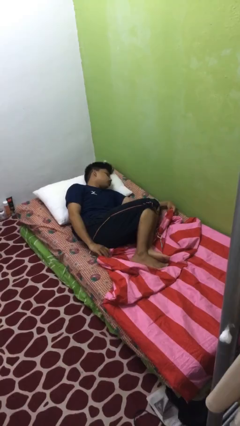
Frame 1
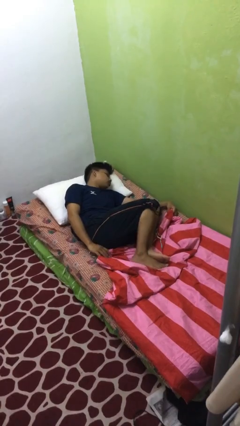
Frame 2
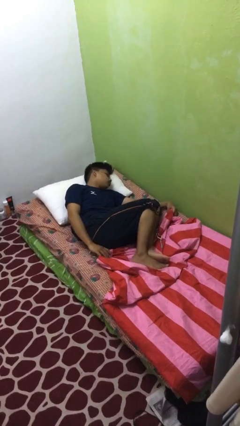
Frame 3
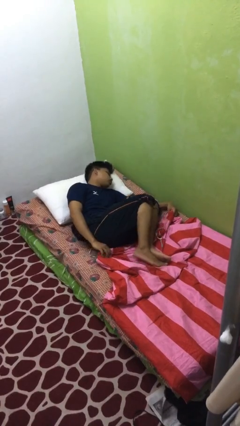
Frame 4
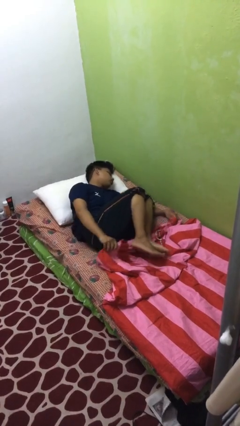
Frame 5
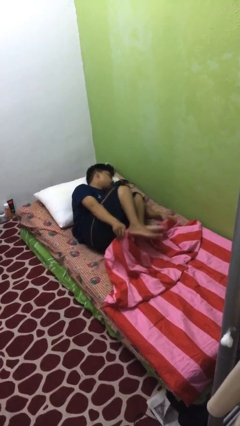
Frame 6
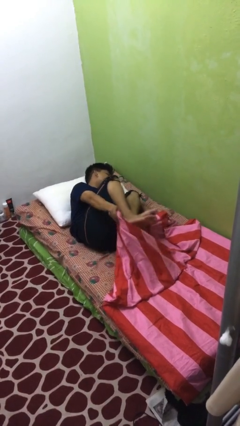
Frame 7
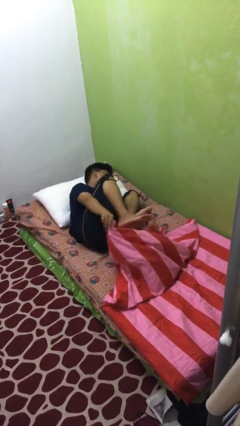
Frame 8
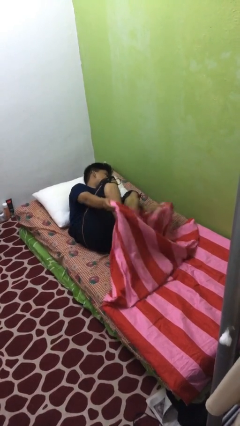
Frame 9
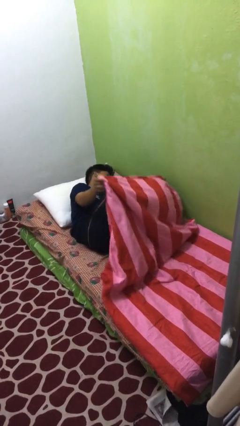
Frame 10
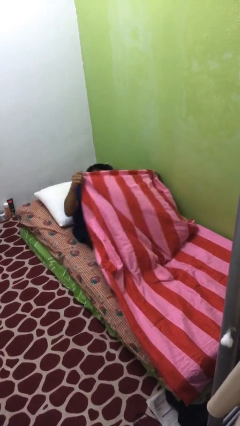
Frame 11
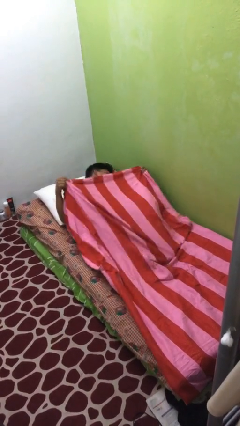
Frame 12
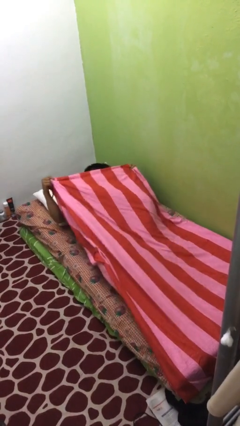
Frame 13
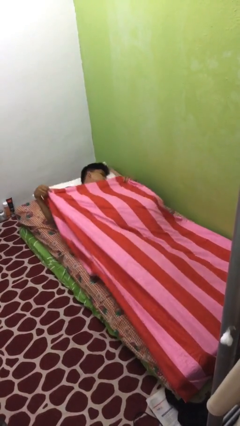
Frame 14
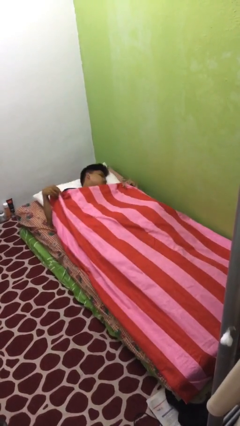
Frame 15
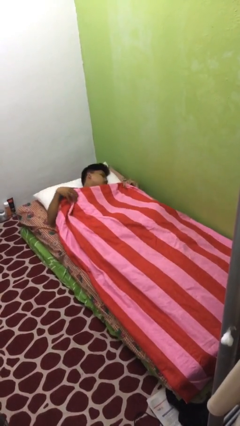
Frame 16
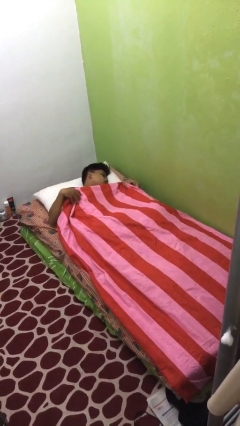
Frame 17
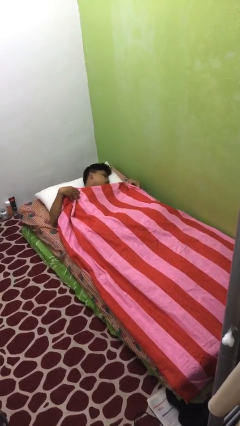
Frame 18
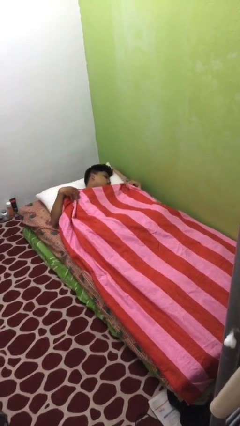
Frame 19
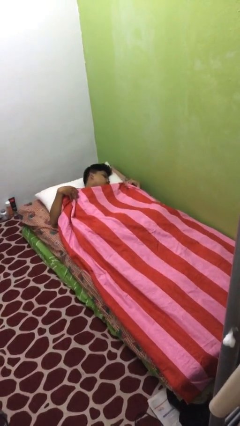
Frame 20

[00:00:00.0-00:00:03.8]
person covers with bedsheets

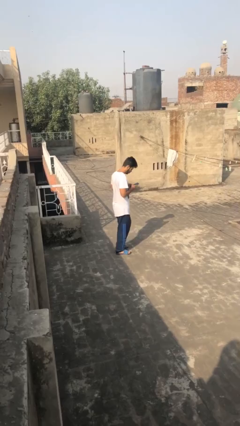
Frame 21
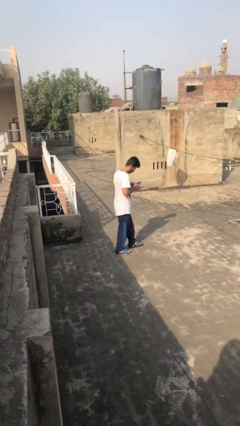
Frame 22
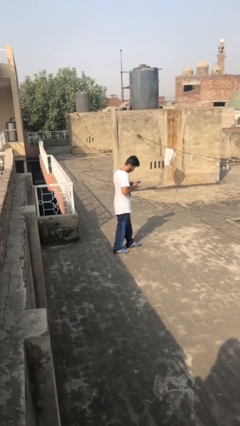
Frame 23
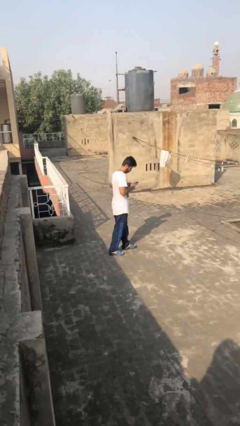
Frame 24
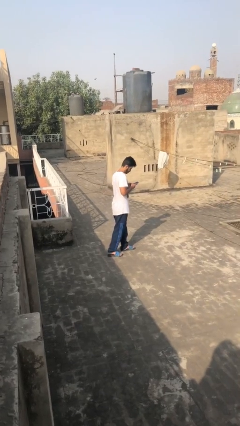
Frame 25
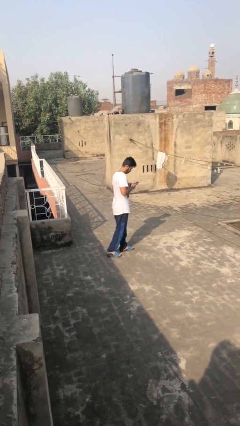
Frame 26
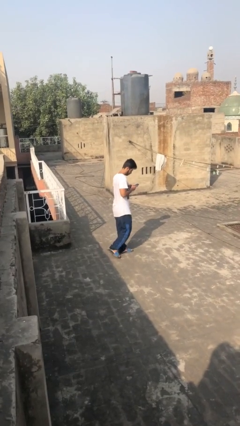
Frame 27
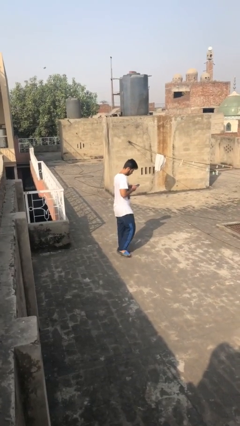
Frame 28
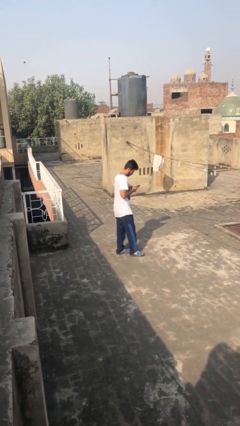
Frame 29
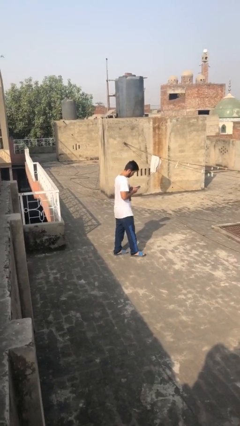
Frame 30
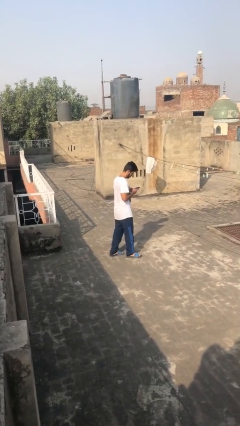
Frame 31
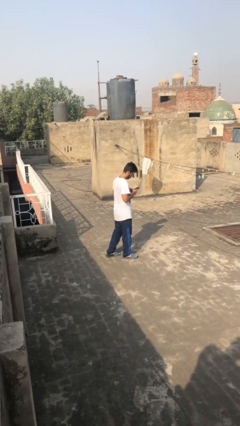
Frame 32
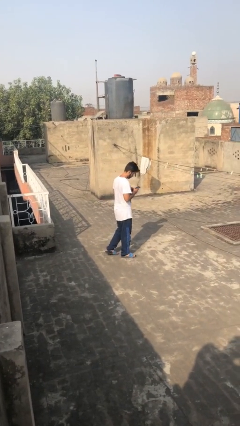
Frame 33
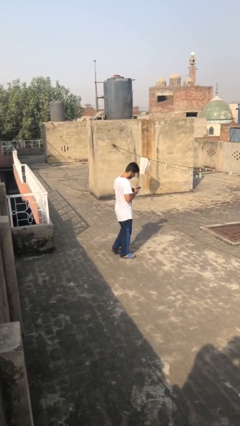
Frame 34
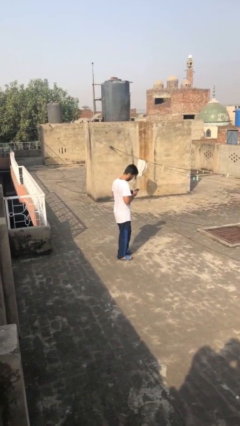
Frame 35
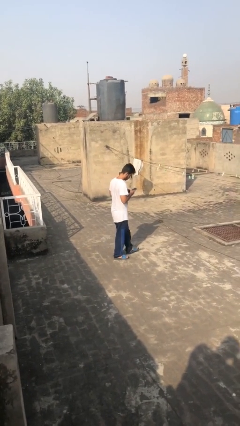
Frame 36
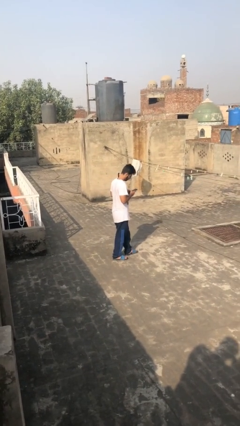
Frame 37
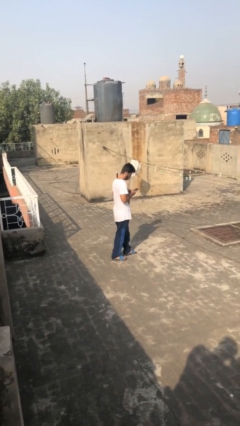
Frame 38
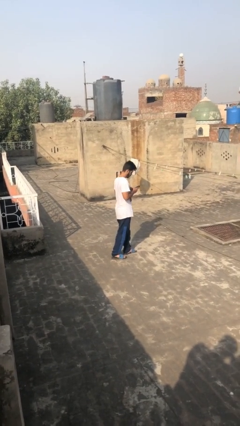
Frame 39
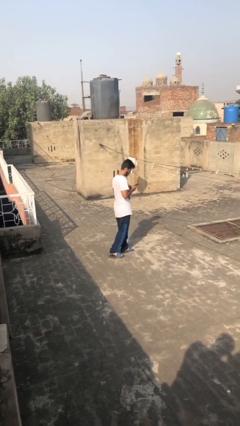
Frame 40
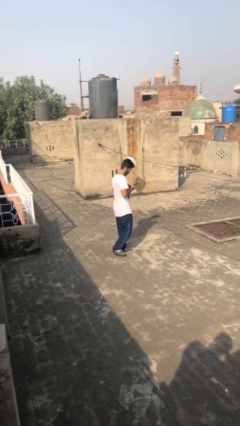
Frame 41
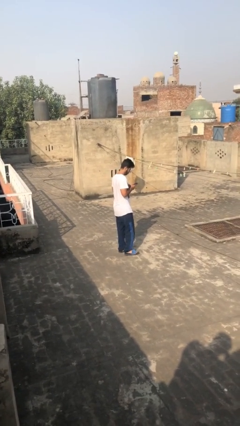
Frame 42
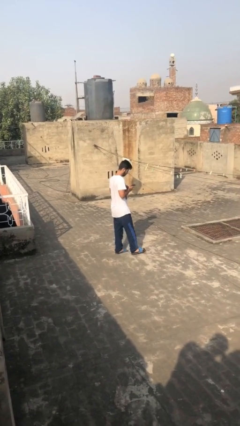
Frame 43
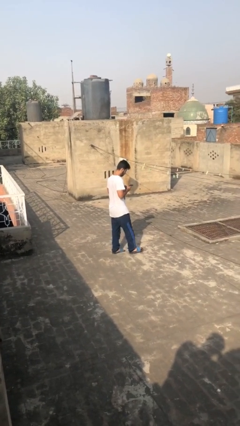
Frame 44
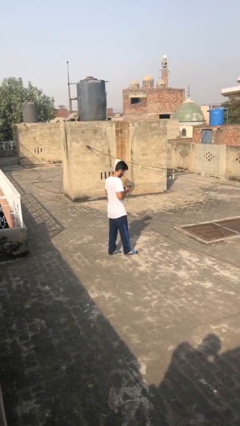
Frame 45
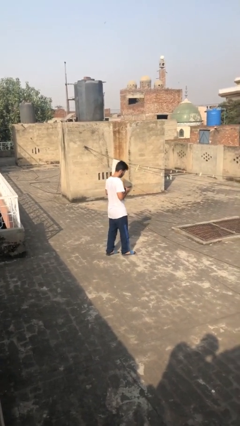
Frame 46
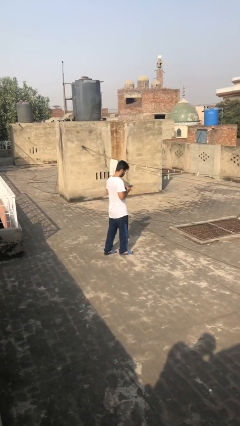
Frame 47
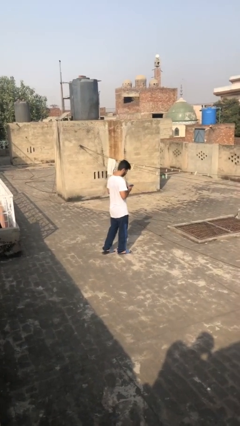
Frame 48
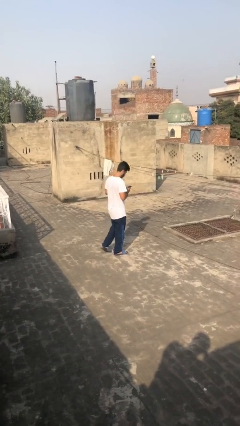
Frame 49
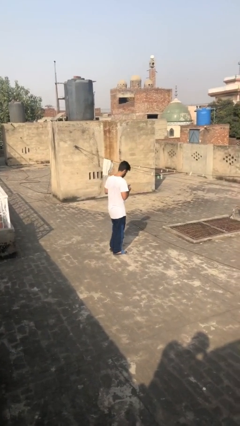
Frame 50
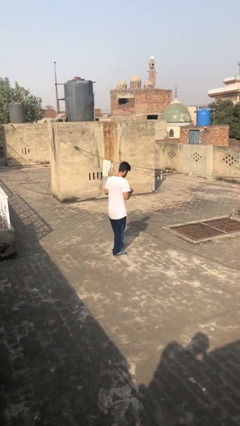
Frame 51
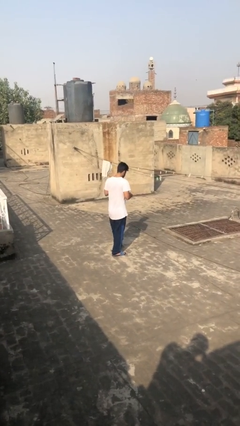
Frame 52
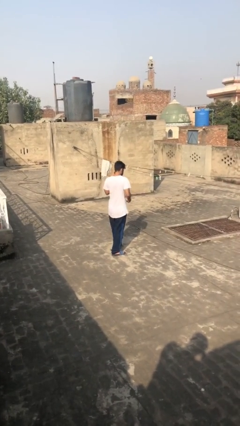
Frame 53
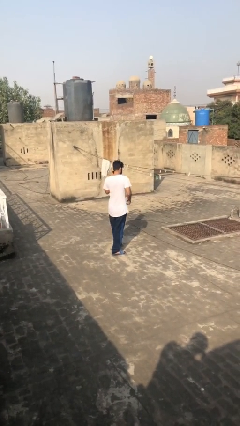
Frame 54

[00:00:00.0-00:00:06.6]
person texts on phone

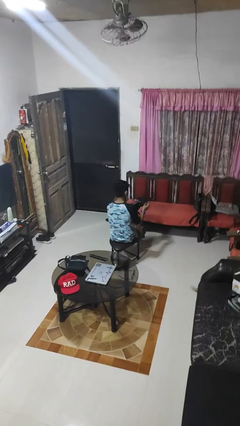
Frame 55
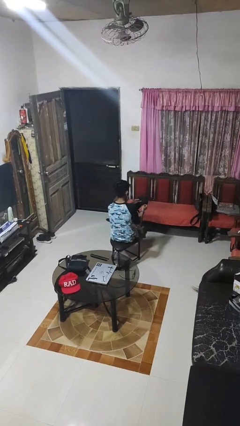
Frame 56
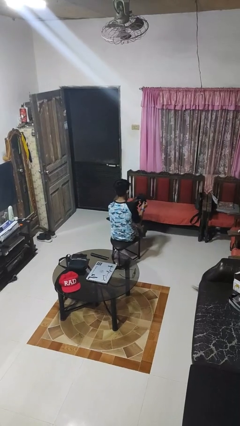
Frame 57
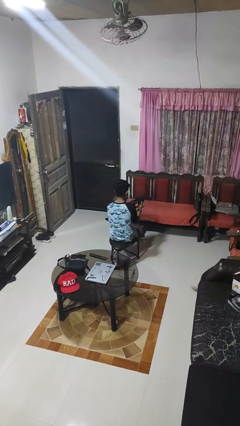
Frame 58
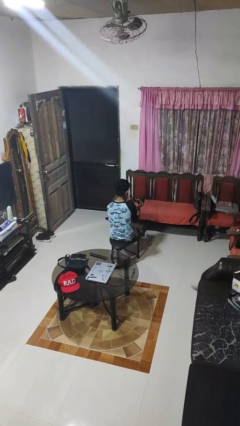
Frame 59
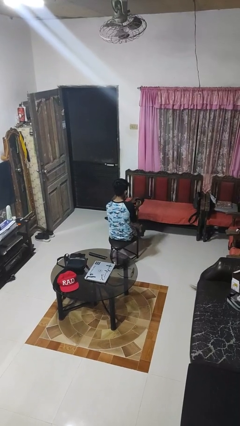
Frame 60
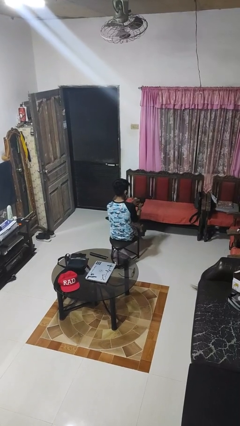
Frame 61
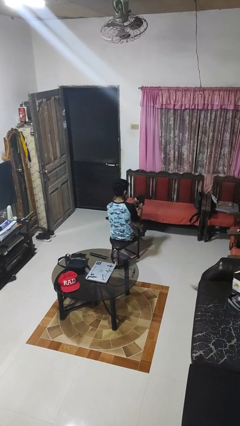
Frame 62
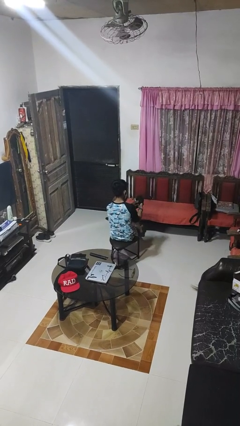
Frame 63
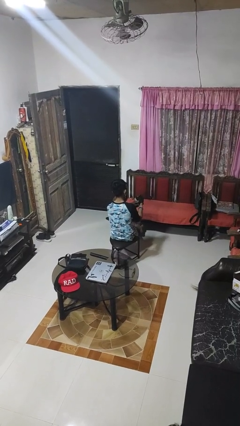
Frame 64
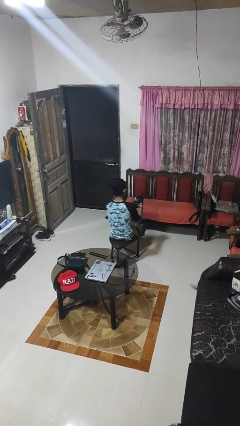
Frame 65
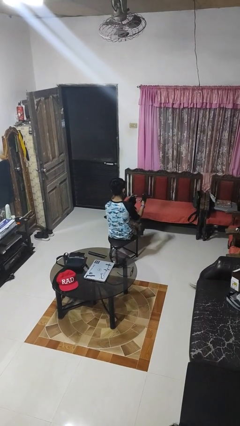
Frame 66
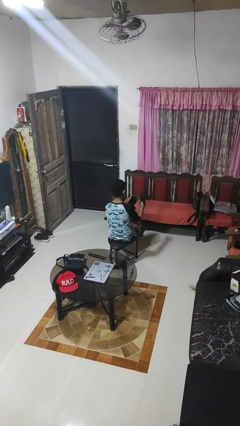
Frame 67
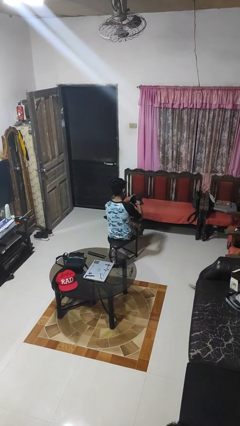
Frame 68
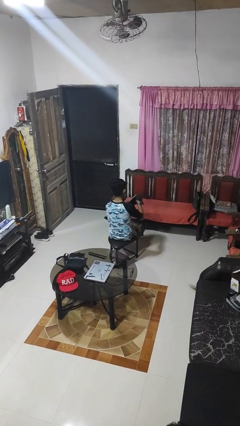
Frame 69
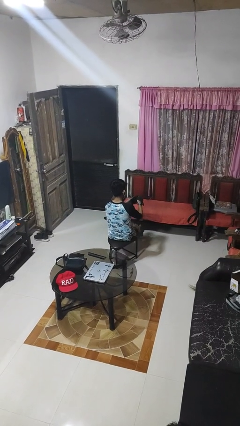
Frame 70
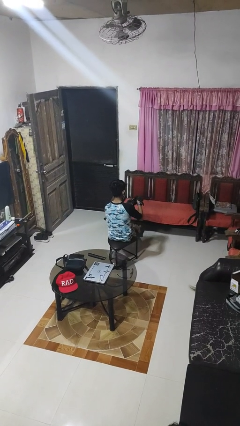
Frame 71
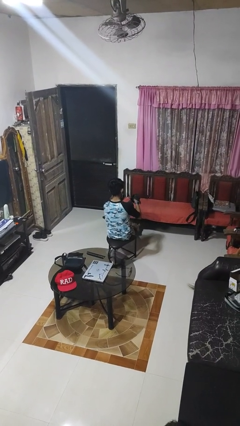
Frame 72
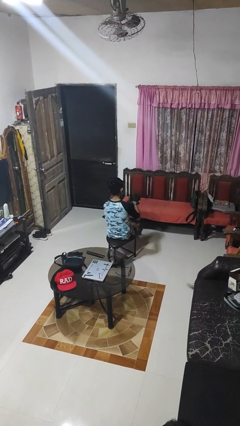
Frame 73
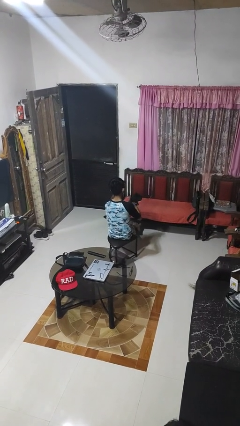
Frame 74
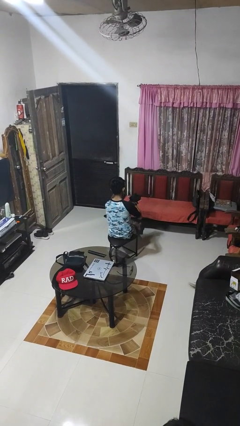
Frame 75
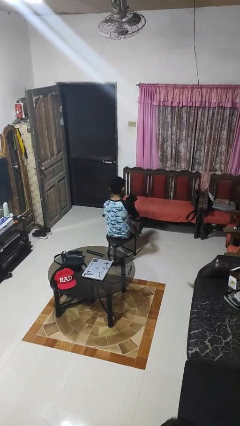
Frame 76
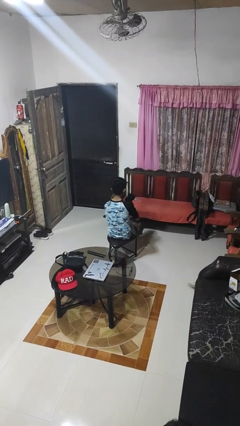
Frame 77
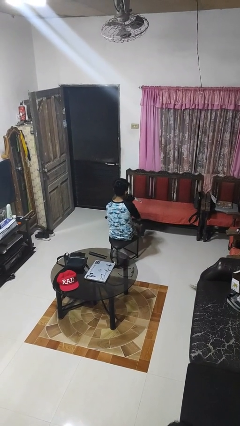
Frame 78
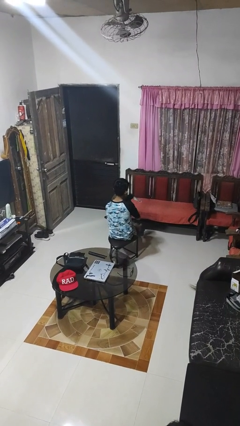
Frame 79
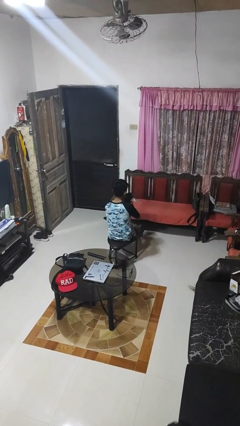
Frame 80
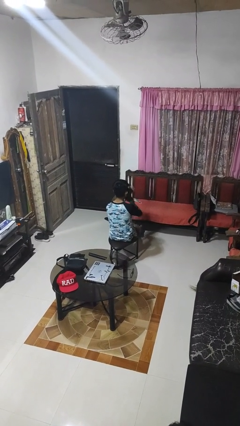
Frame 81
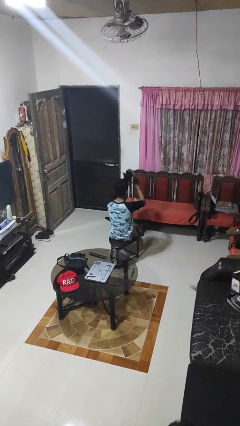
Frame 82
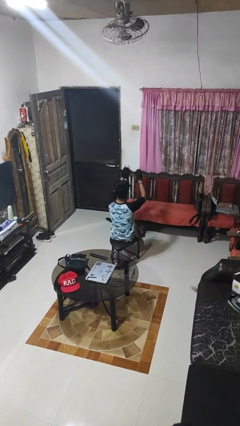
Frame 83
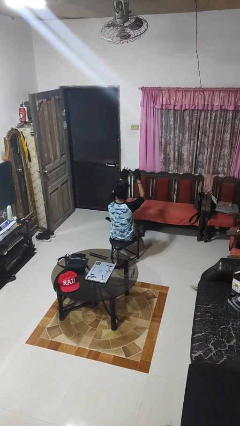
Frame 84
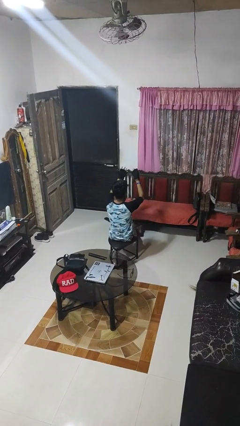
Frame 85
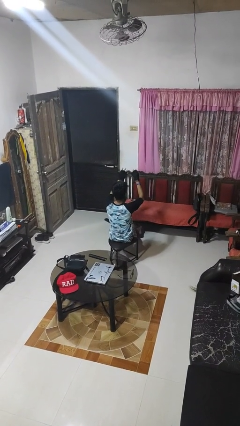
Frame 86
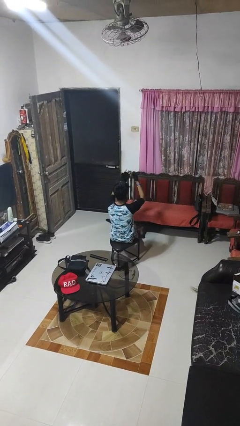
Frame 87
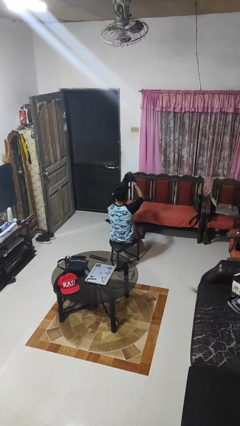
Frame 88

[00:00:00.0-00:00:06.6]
person puts on gloves

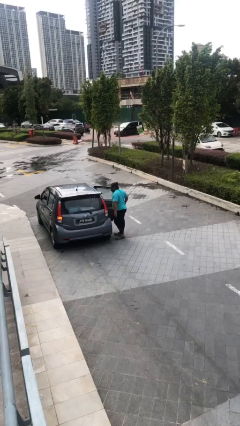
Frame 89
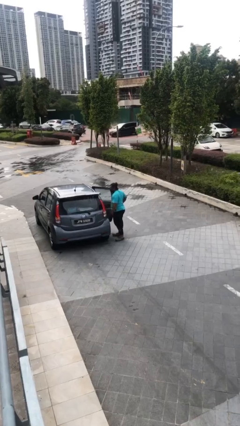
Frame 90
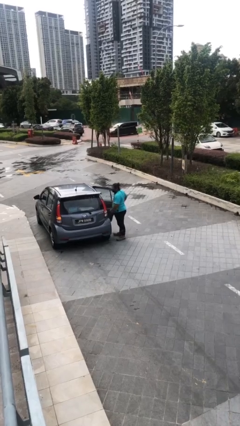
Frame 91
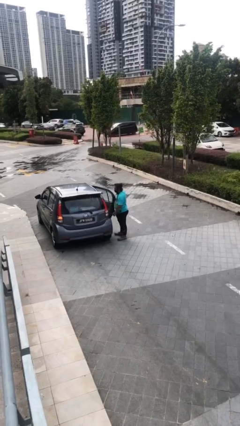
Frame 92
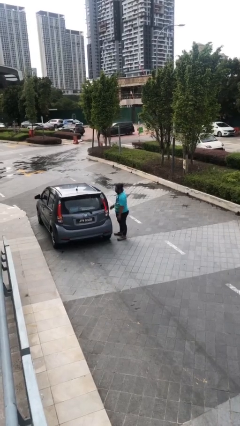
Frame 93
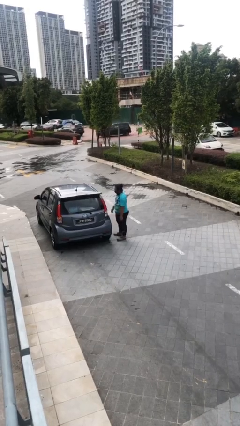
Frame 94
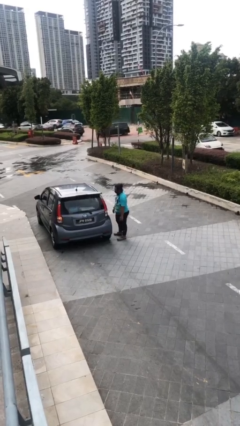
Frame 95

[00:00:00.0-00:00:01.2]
person closes car door
